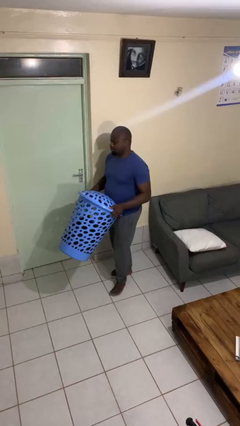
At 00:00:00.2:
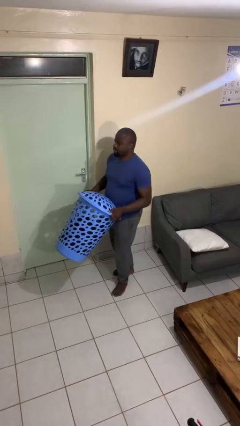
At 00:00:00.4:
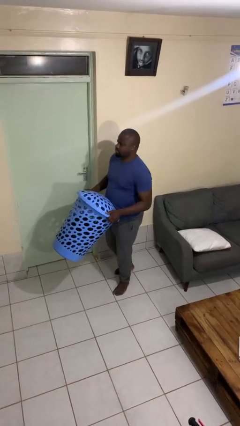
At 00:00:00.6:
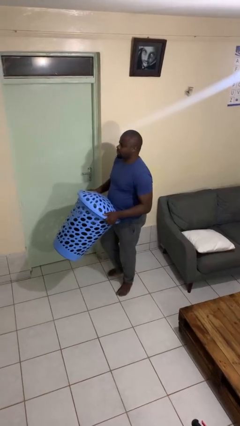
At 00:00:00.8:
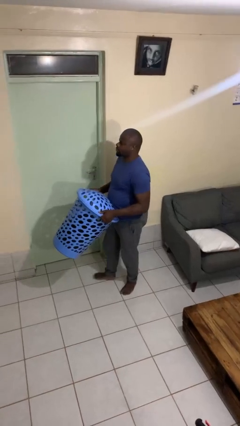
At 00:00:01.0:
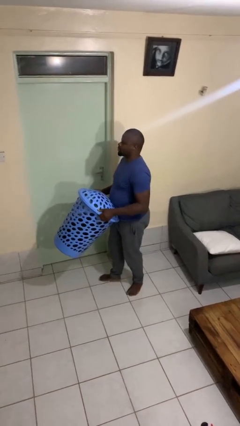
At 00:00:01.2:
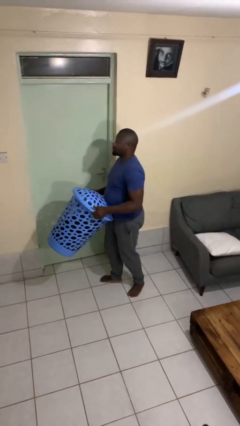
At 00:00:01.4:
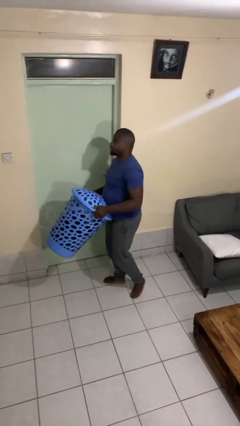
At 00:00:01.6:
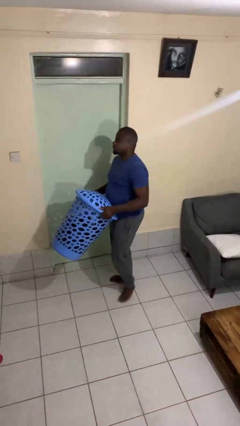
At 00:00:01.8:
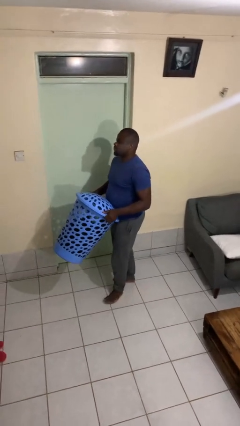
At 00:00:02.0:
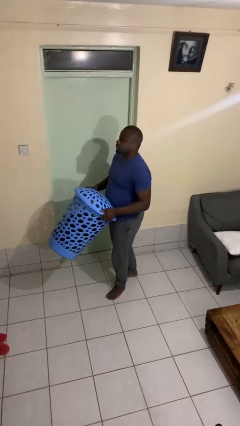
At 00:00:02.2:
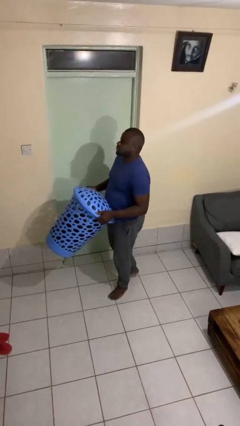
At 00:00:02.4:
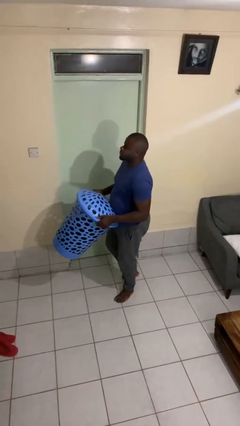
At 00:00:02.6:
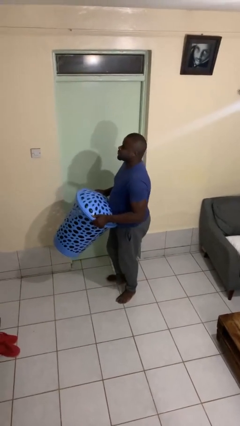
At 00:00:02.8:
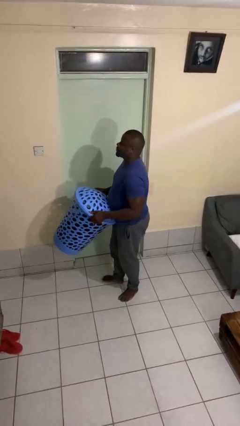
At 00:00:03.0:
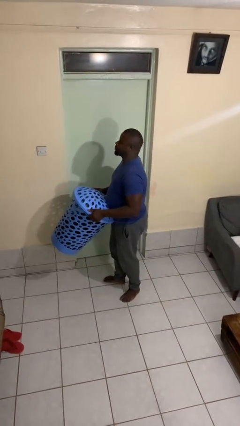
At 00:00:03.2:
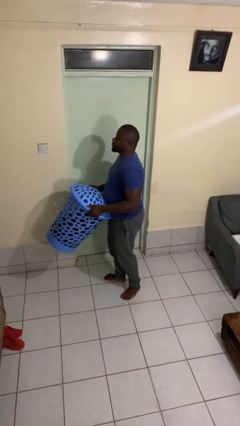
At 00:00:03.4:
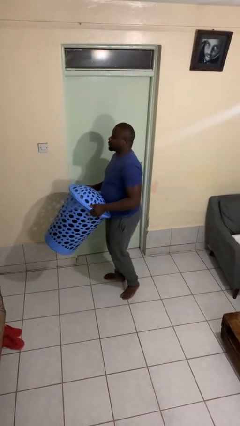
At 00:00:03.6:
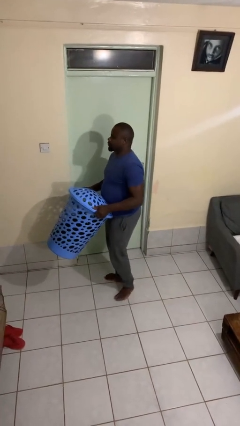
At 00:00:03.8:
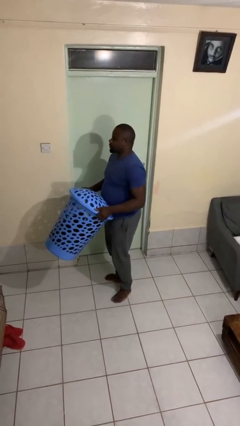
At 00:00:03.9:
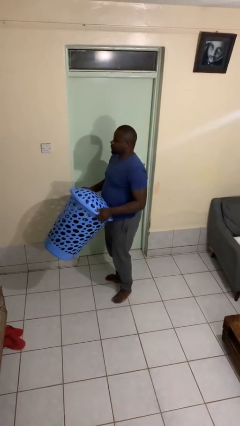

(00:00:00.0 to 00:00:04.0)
person carries laundry basket

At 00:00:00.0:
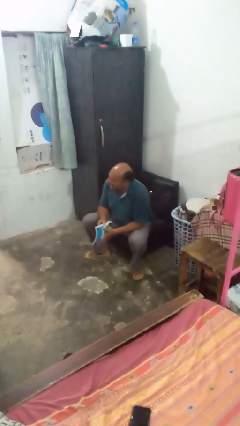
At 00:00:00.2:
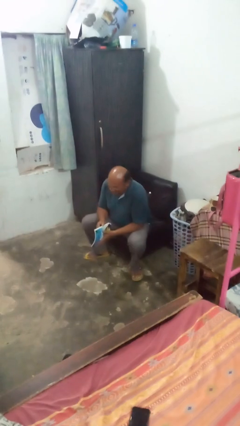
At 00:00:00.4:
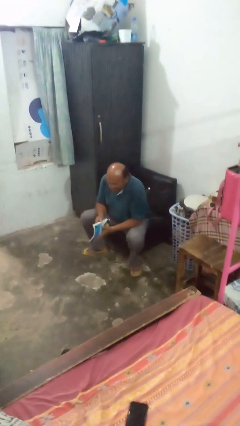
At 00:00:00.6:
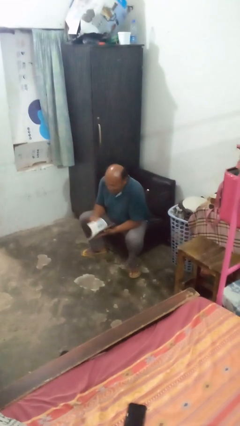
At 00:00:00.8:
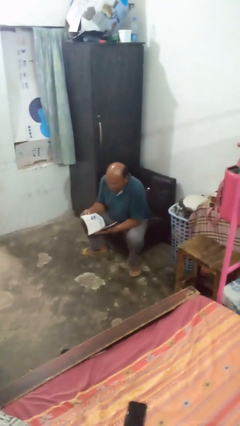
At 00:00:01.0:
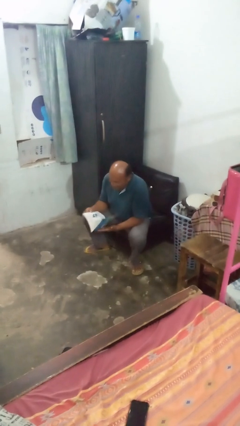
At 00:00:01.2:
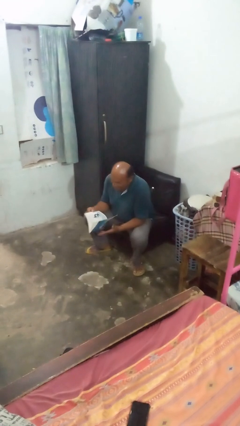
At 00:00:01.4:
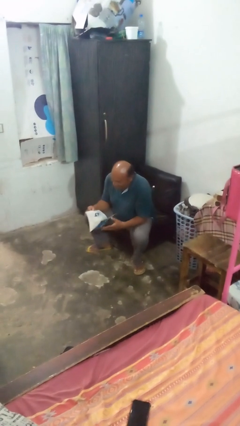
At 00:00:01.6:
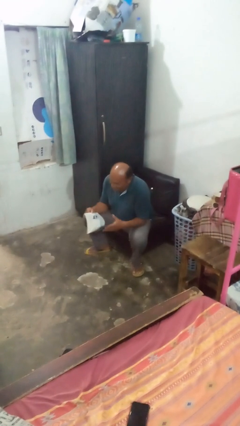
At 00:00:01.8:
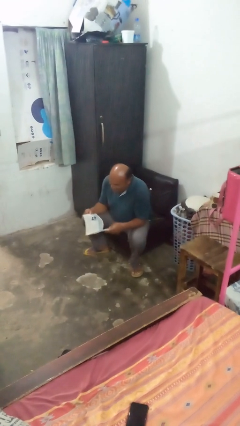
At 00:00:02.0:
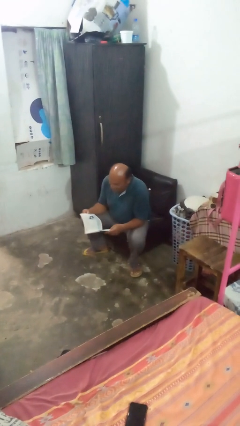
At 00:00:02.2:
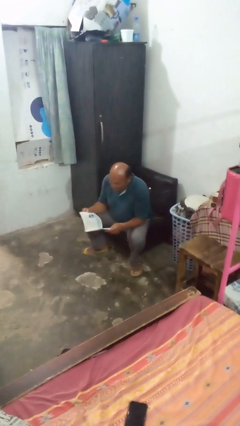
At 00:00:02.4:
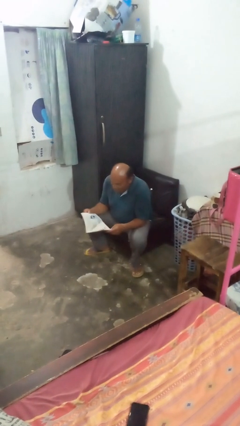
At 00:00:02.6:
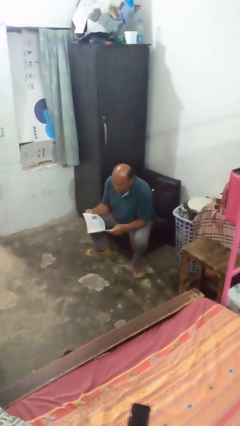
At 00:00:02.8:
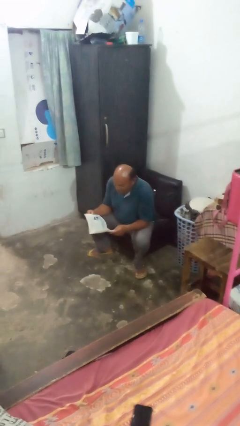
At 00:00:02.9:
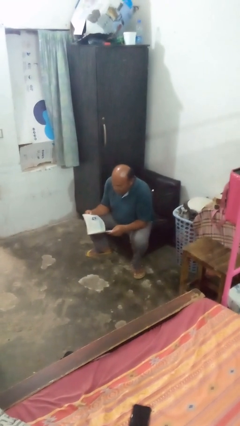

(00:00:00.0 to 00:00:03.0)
person reads book

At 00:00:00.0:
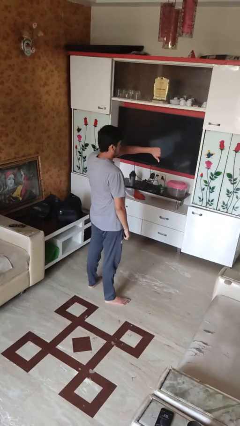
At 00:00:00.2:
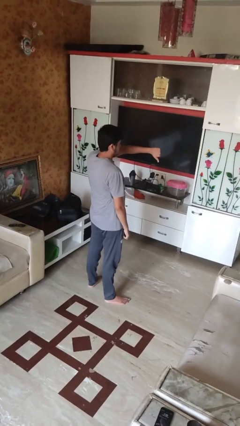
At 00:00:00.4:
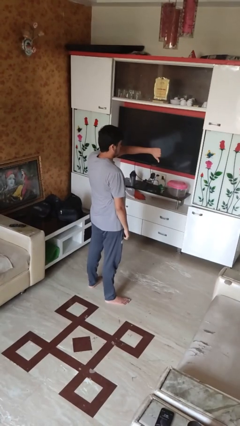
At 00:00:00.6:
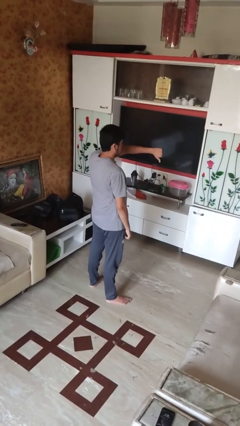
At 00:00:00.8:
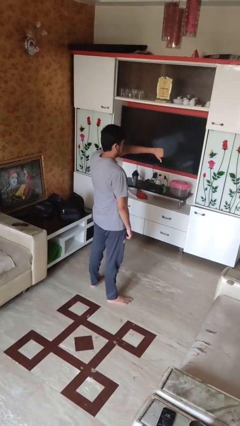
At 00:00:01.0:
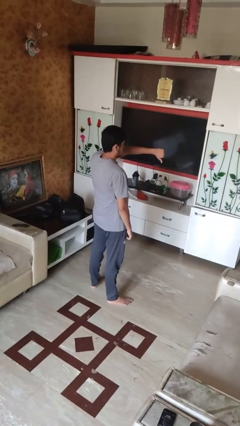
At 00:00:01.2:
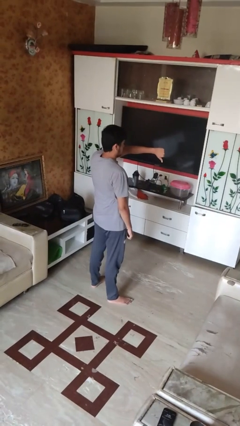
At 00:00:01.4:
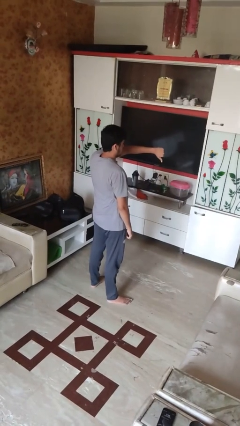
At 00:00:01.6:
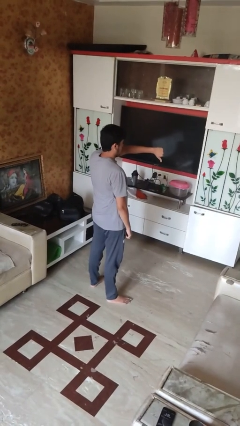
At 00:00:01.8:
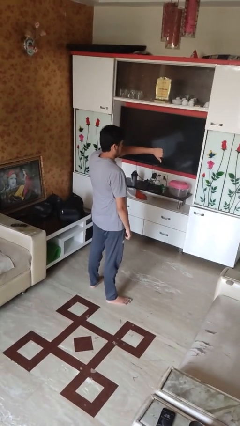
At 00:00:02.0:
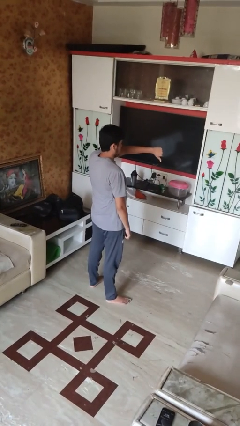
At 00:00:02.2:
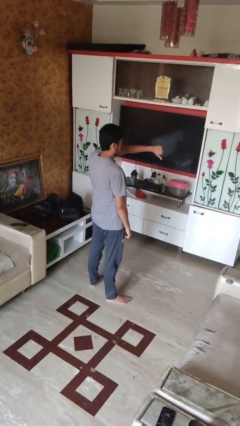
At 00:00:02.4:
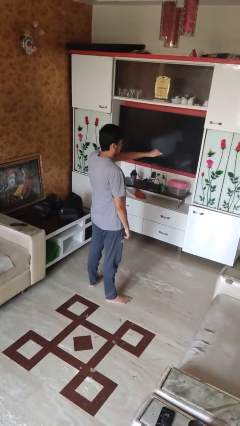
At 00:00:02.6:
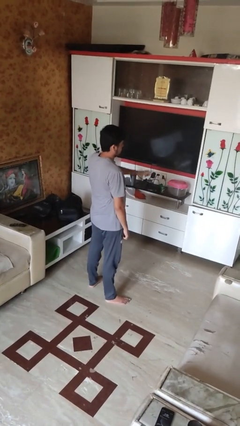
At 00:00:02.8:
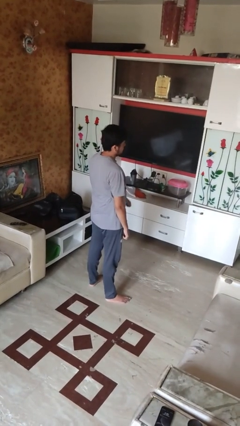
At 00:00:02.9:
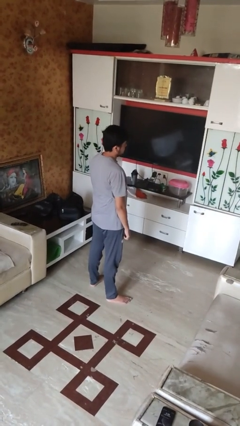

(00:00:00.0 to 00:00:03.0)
person gestures thumbs down

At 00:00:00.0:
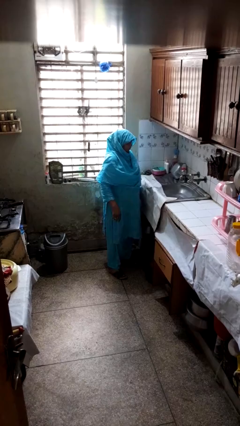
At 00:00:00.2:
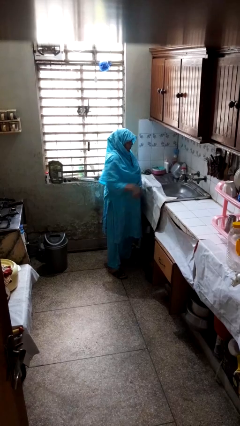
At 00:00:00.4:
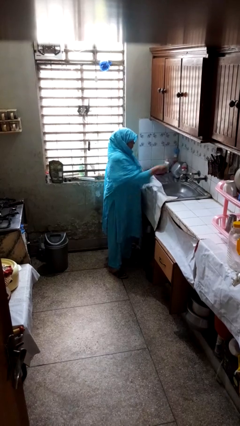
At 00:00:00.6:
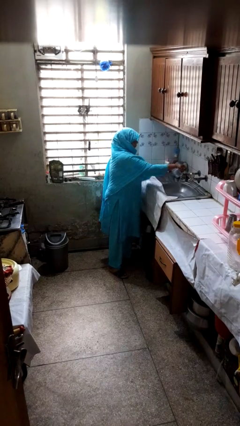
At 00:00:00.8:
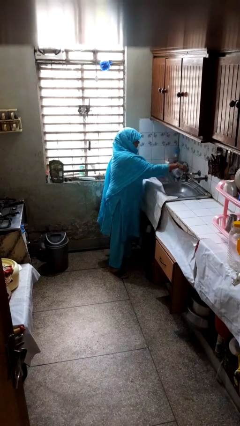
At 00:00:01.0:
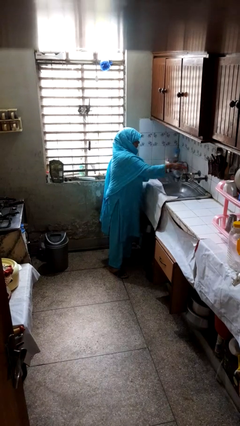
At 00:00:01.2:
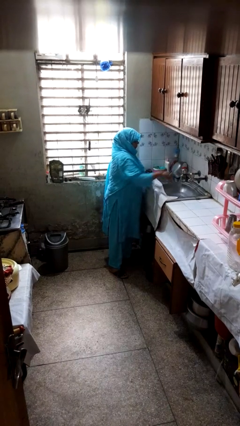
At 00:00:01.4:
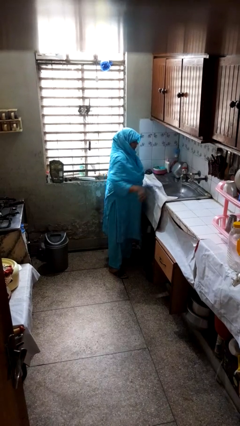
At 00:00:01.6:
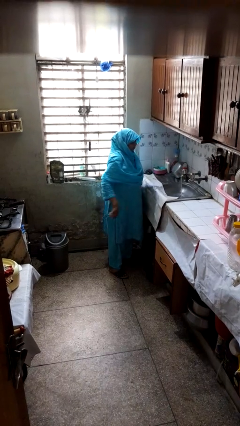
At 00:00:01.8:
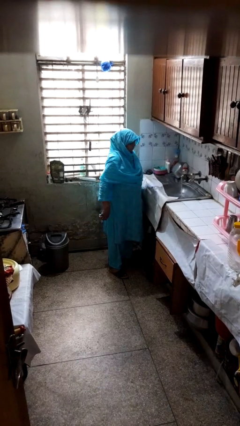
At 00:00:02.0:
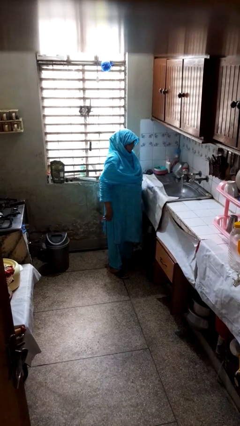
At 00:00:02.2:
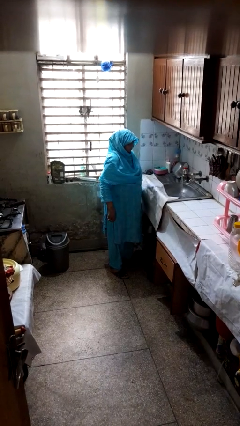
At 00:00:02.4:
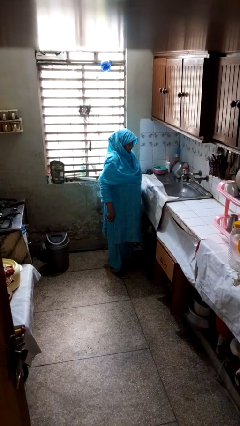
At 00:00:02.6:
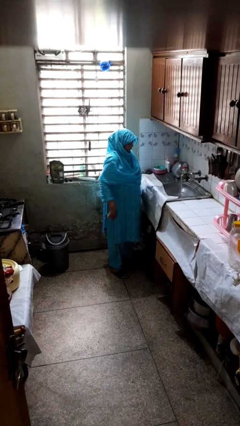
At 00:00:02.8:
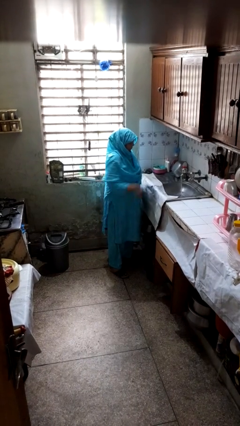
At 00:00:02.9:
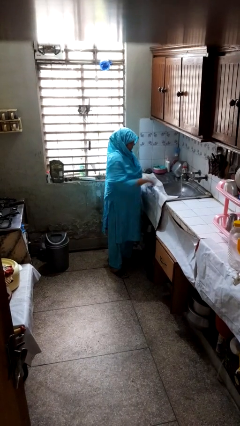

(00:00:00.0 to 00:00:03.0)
person turns on faucet

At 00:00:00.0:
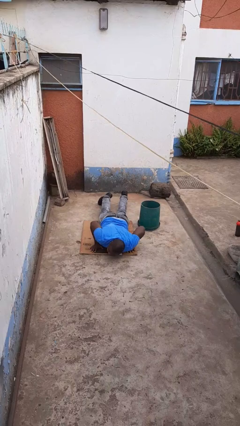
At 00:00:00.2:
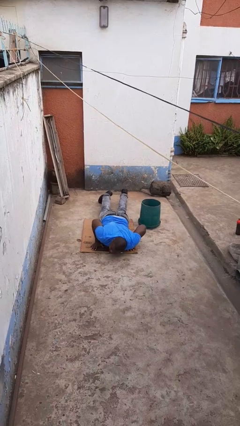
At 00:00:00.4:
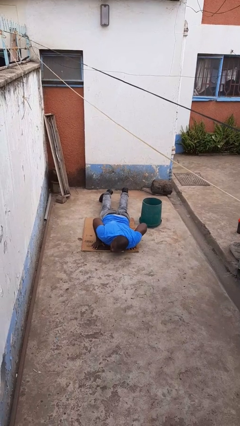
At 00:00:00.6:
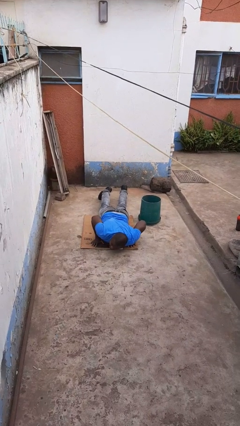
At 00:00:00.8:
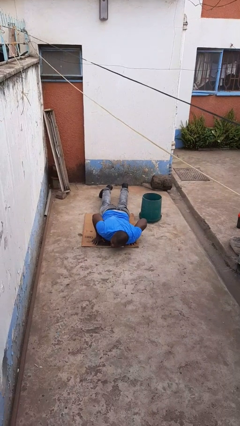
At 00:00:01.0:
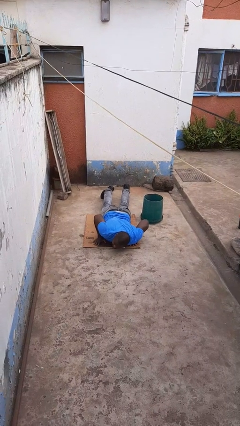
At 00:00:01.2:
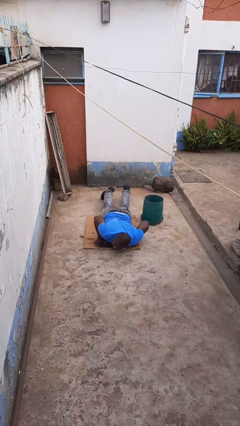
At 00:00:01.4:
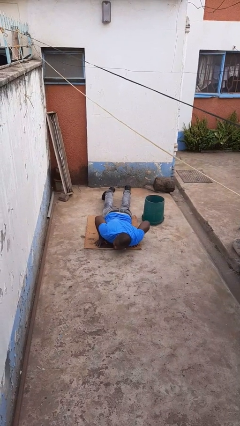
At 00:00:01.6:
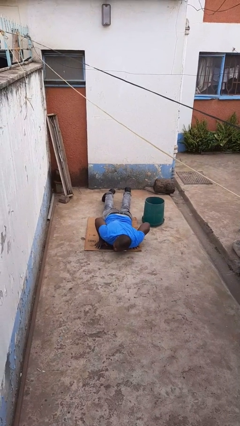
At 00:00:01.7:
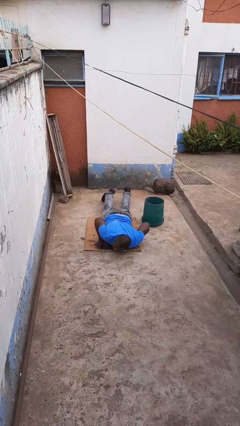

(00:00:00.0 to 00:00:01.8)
person lies down on floor

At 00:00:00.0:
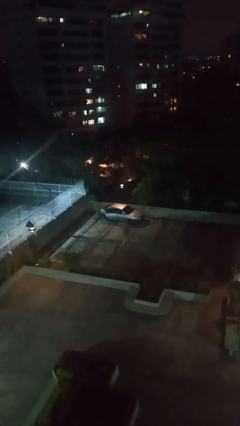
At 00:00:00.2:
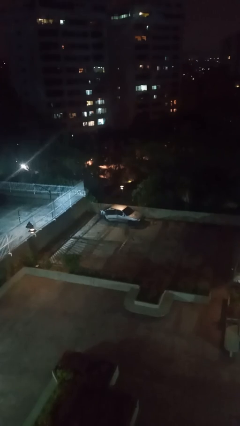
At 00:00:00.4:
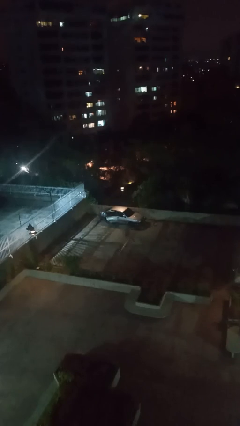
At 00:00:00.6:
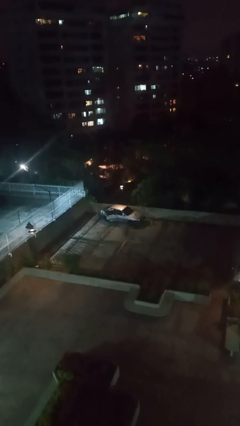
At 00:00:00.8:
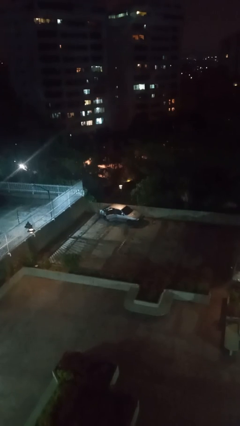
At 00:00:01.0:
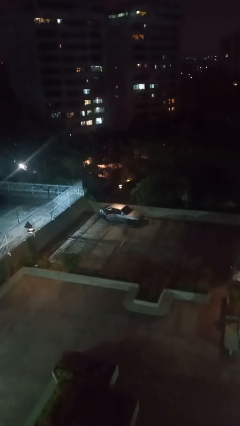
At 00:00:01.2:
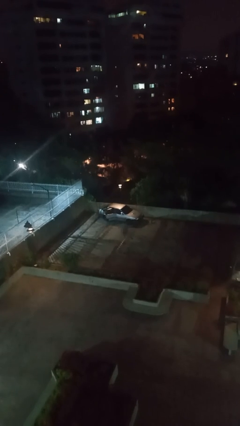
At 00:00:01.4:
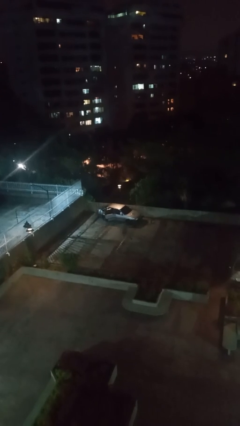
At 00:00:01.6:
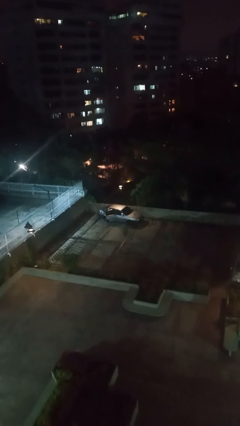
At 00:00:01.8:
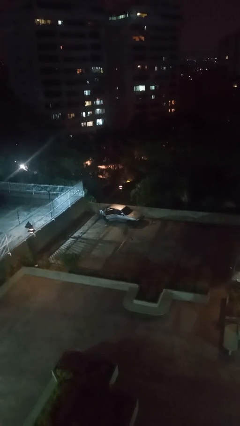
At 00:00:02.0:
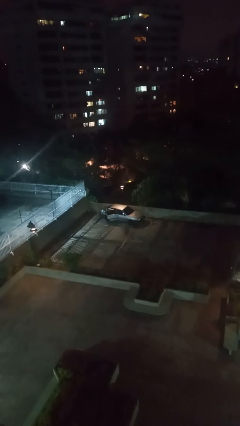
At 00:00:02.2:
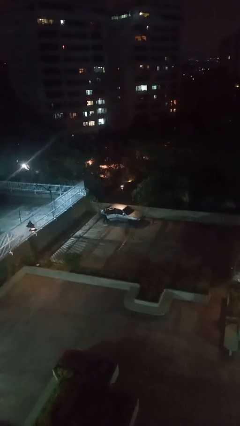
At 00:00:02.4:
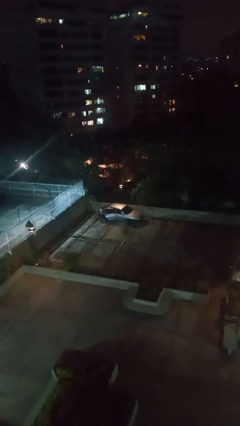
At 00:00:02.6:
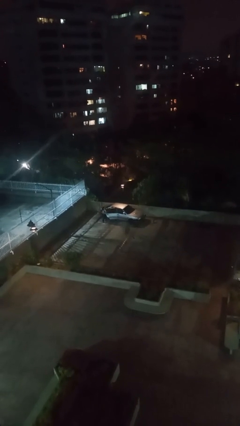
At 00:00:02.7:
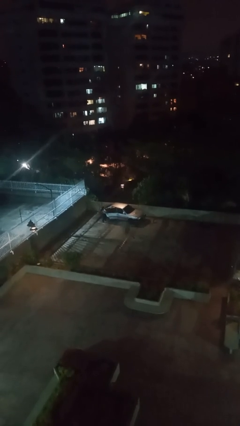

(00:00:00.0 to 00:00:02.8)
car drops off person
